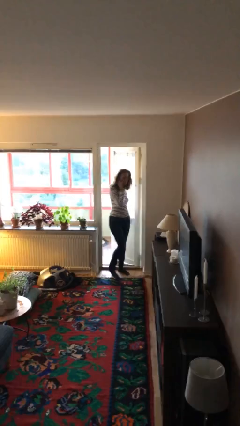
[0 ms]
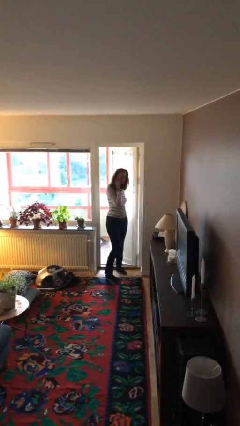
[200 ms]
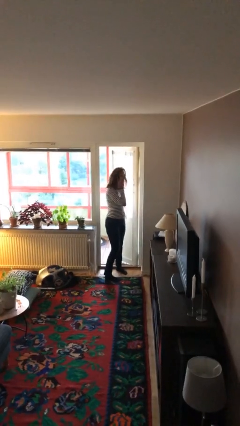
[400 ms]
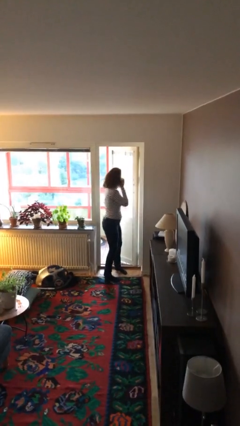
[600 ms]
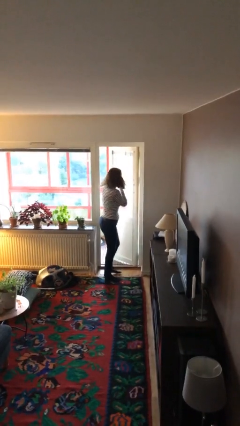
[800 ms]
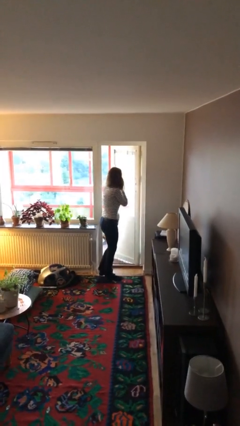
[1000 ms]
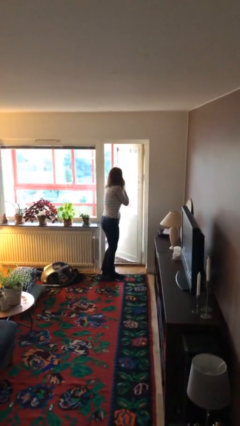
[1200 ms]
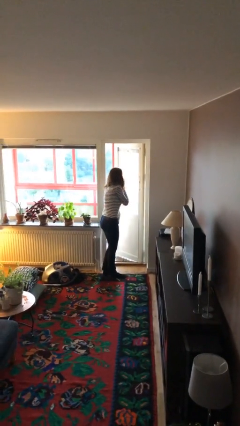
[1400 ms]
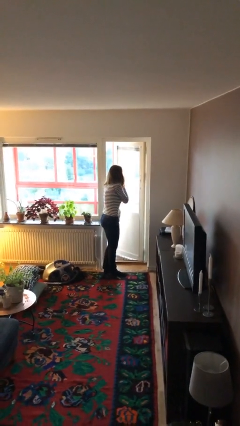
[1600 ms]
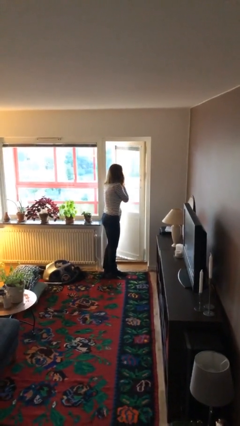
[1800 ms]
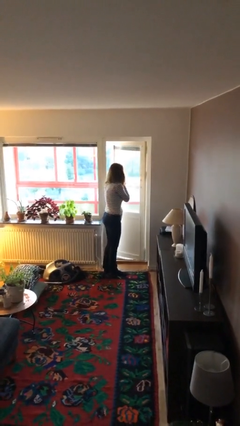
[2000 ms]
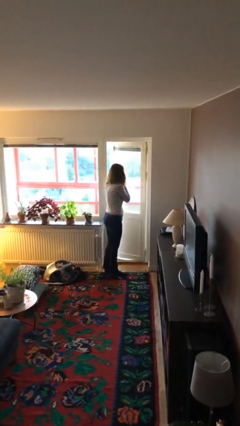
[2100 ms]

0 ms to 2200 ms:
person enters scene through structure

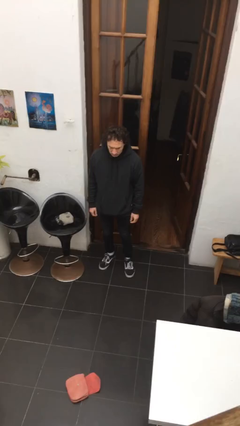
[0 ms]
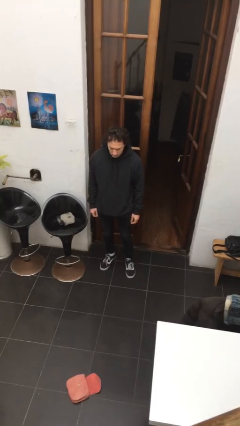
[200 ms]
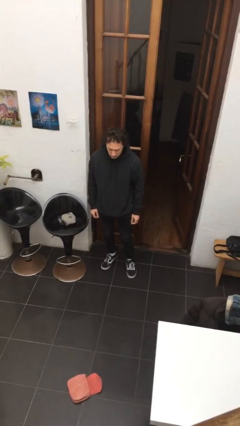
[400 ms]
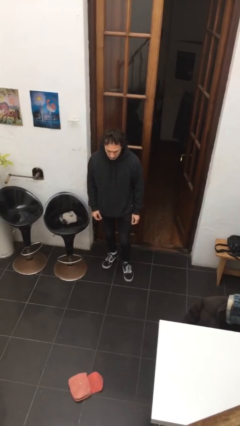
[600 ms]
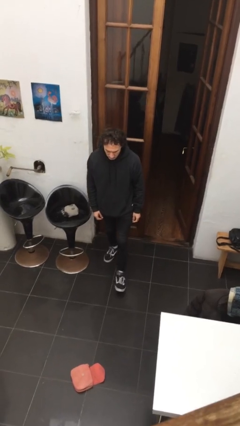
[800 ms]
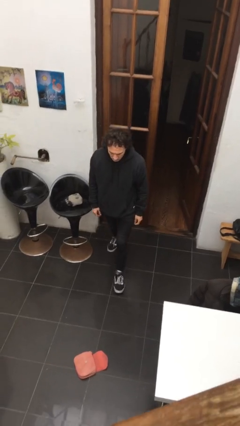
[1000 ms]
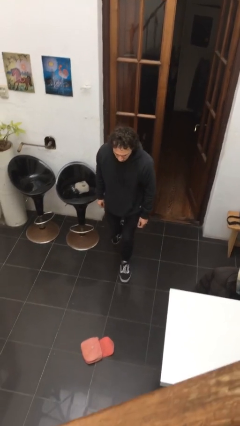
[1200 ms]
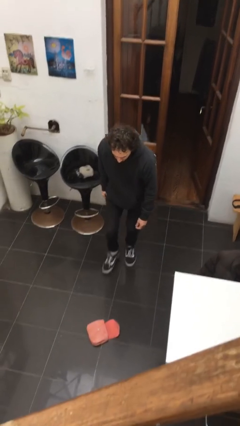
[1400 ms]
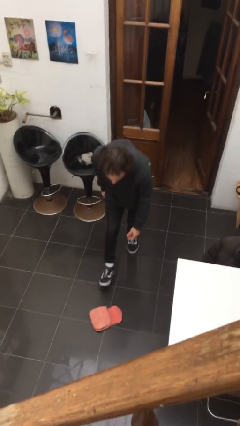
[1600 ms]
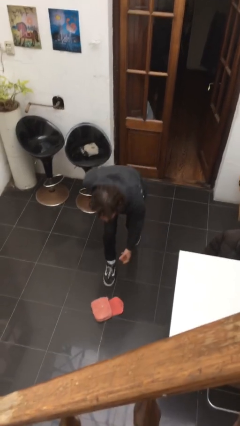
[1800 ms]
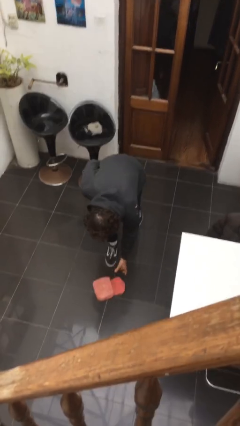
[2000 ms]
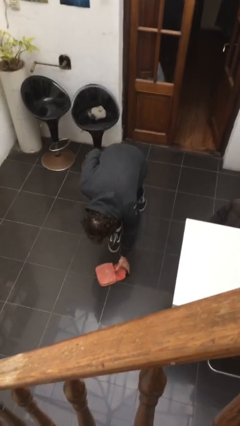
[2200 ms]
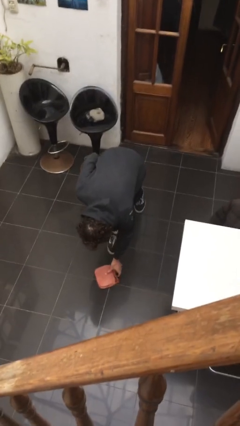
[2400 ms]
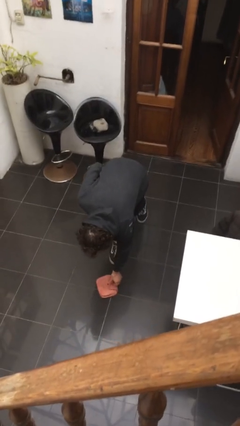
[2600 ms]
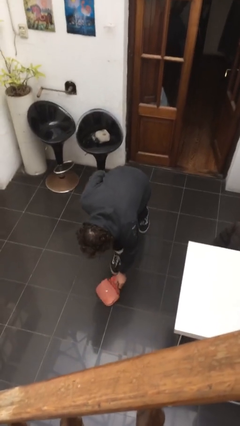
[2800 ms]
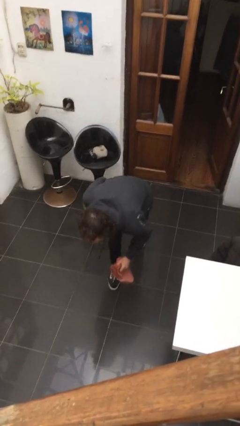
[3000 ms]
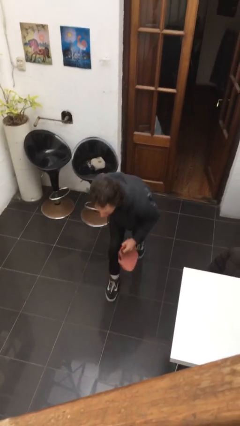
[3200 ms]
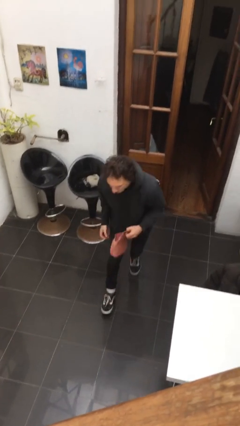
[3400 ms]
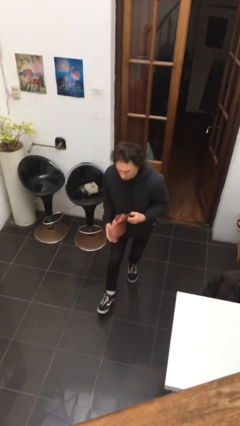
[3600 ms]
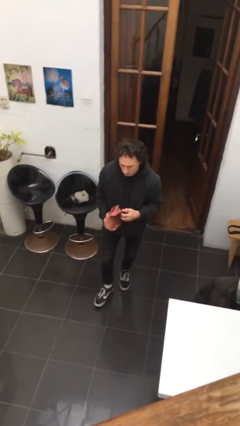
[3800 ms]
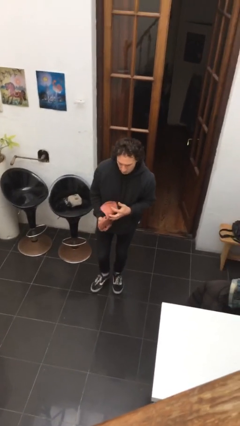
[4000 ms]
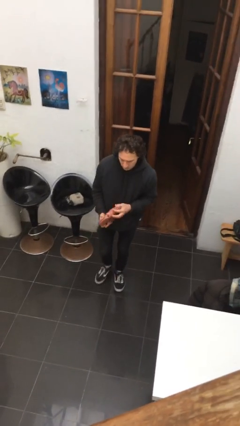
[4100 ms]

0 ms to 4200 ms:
person picks up object from floor

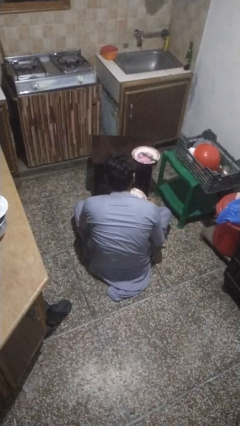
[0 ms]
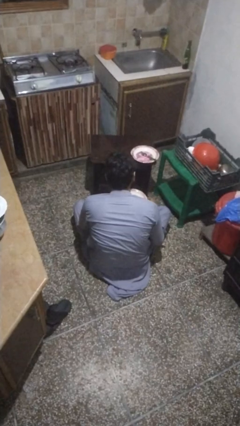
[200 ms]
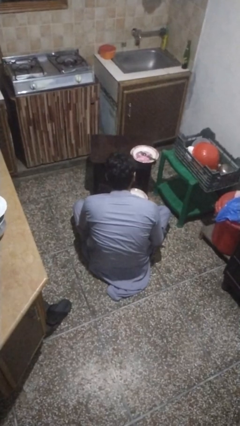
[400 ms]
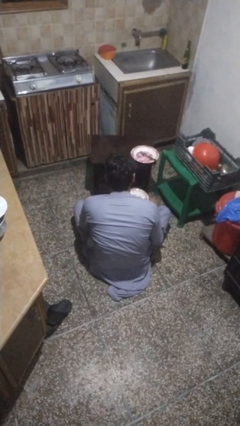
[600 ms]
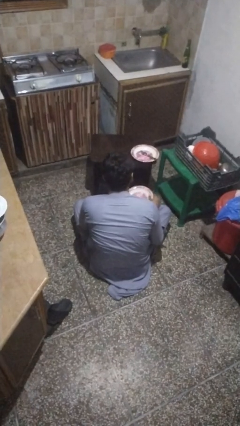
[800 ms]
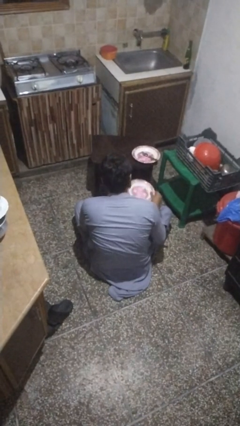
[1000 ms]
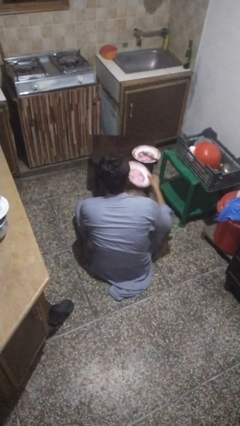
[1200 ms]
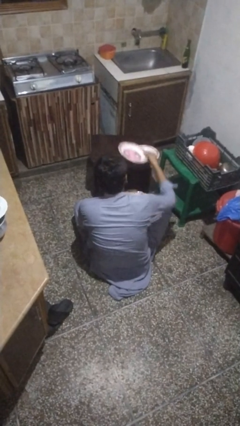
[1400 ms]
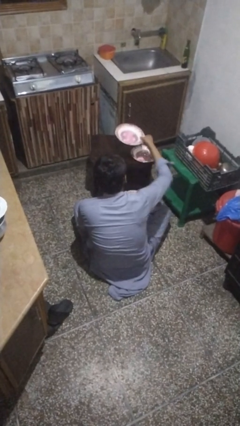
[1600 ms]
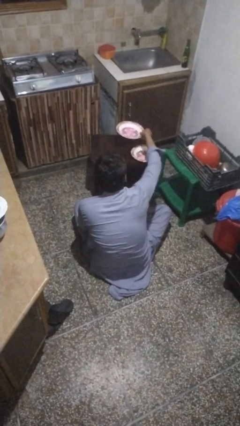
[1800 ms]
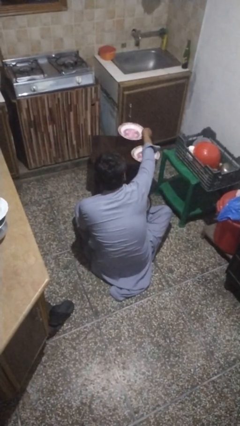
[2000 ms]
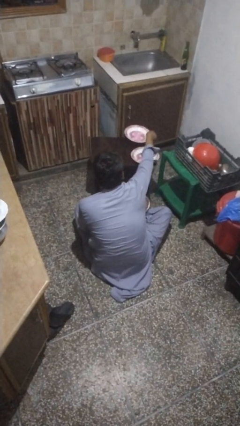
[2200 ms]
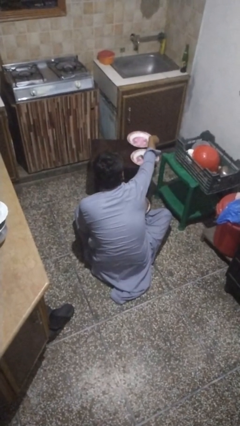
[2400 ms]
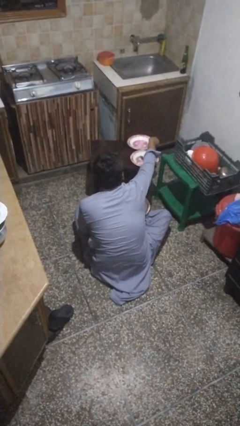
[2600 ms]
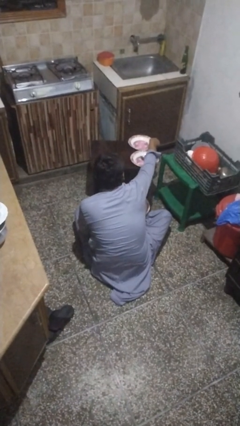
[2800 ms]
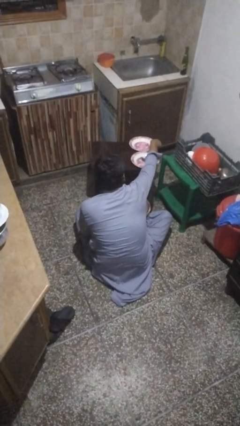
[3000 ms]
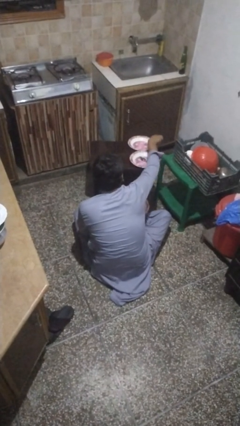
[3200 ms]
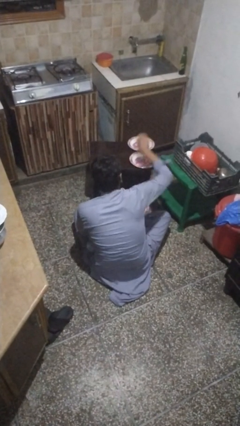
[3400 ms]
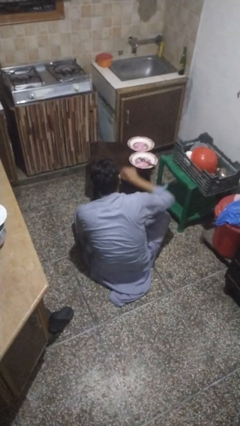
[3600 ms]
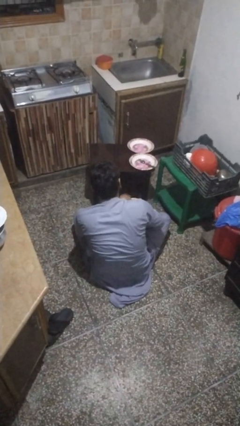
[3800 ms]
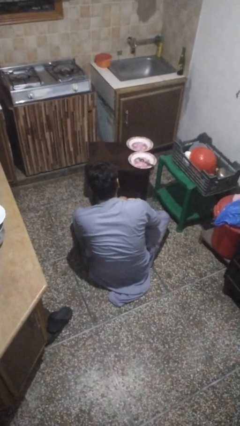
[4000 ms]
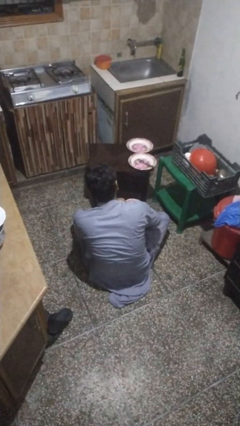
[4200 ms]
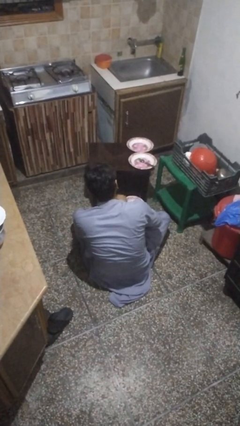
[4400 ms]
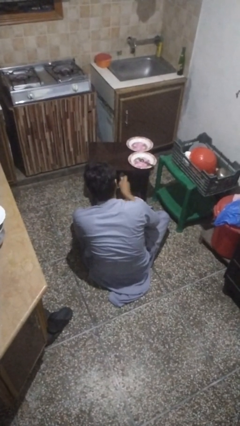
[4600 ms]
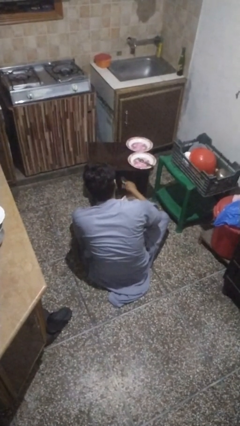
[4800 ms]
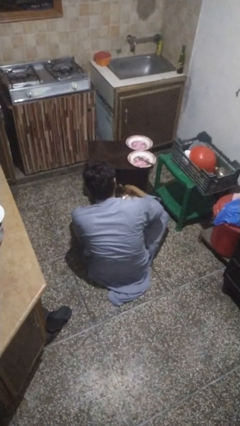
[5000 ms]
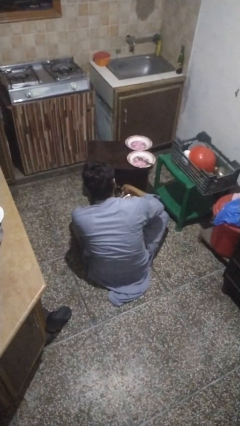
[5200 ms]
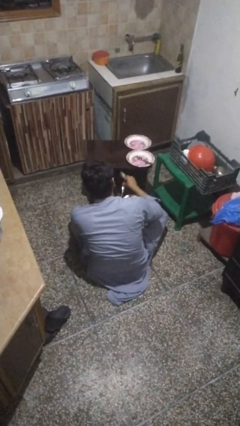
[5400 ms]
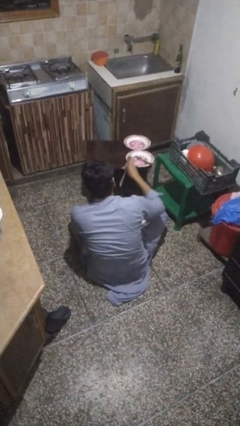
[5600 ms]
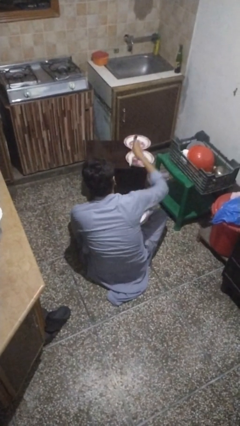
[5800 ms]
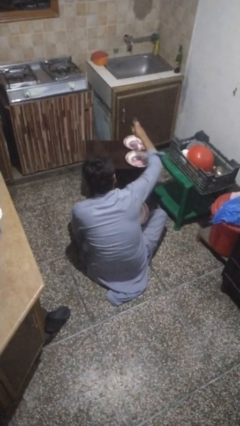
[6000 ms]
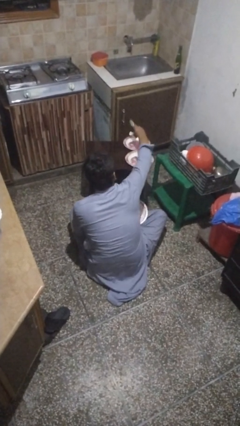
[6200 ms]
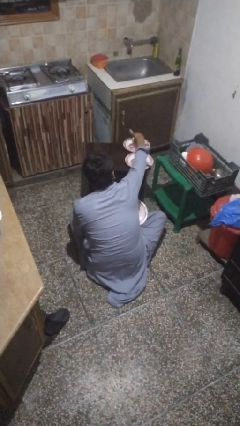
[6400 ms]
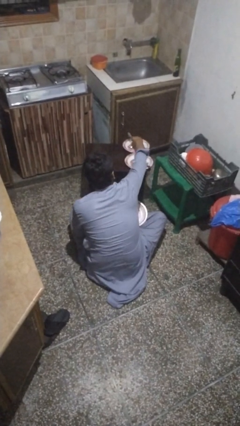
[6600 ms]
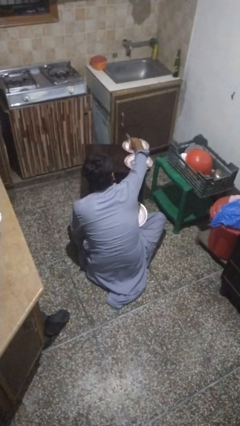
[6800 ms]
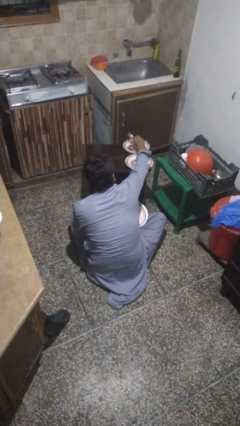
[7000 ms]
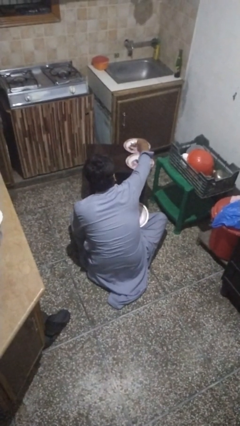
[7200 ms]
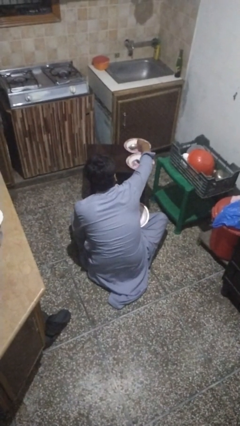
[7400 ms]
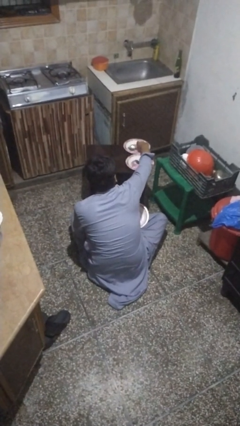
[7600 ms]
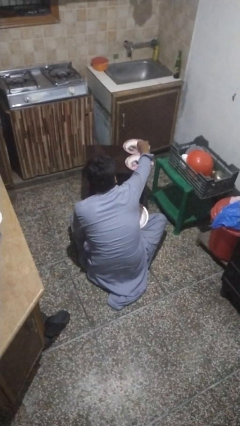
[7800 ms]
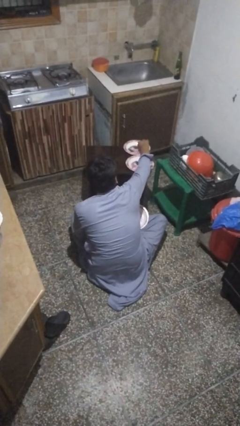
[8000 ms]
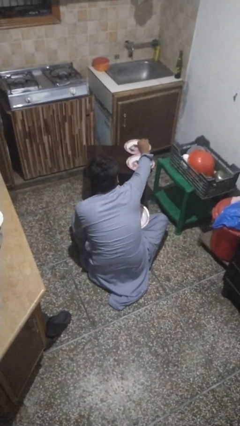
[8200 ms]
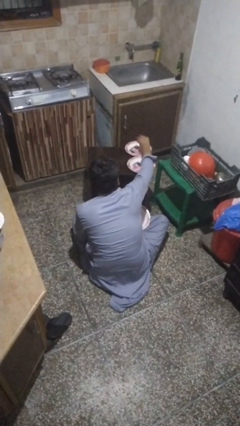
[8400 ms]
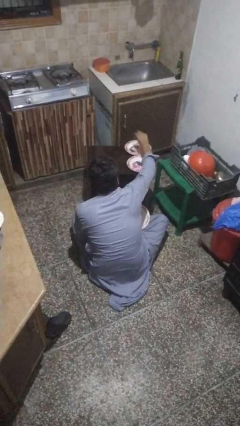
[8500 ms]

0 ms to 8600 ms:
person sets table

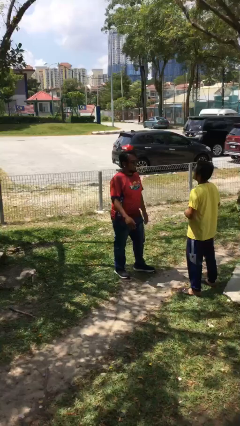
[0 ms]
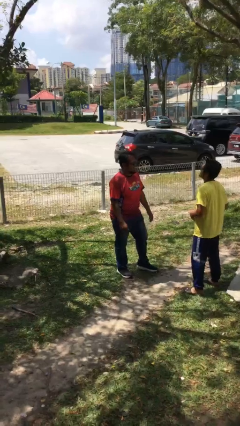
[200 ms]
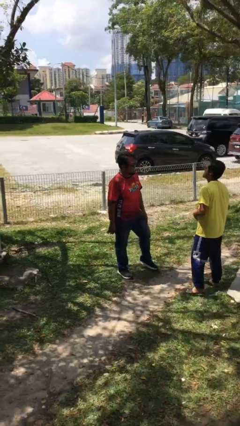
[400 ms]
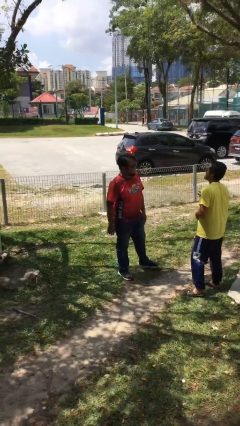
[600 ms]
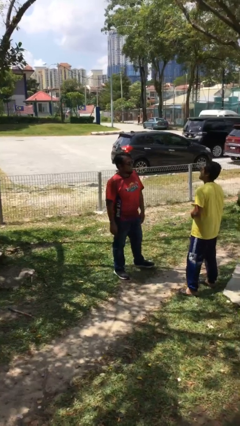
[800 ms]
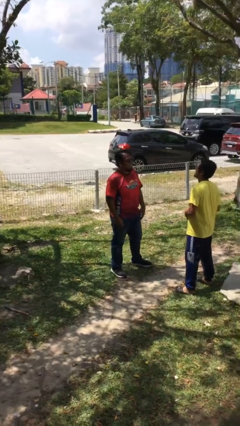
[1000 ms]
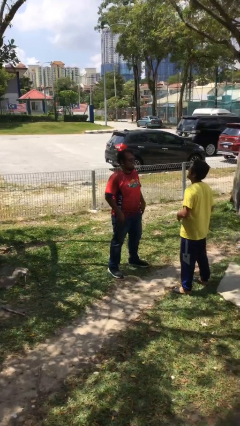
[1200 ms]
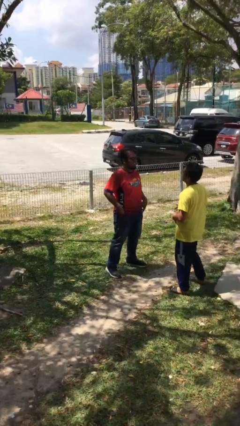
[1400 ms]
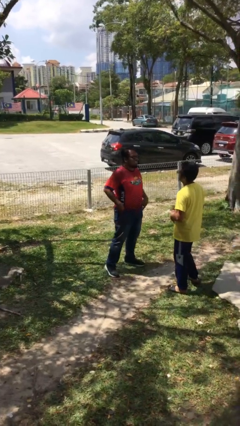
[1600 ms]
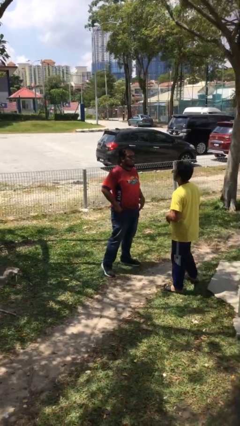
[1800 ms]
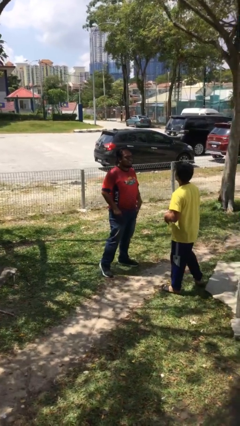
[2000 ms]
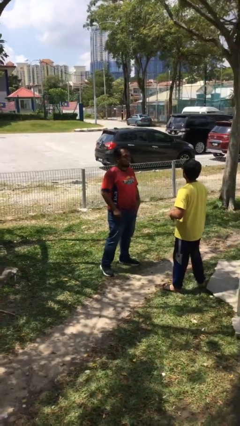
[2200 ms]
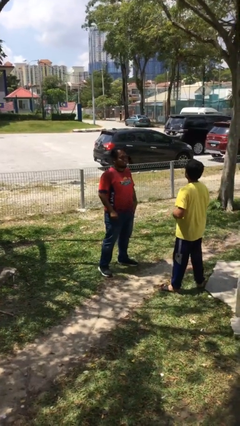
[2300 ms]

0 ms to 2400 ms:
person talks to person

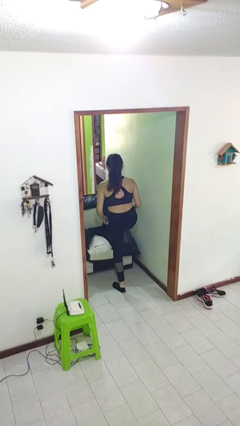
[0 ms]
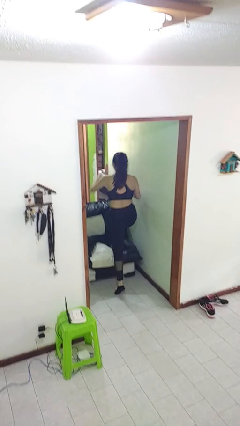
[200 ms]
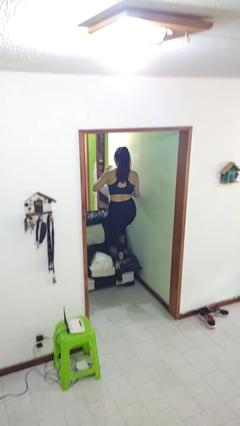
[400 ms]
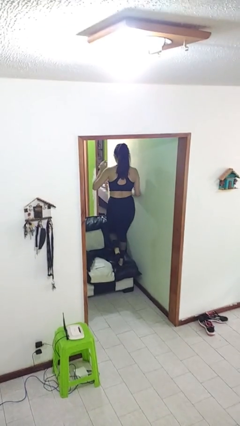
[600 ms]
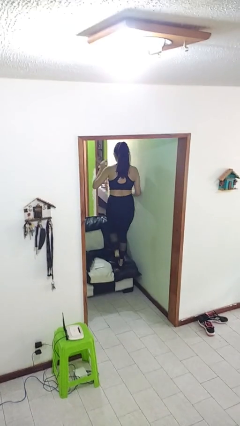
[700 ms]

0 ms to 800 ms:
person climbs on couch
